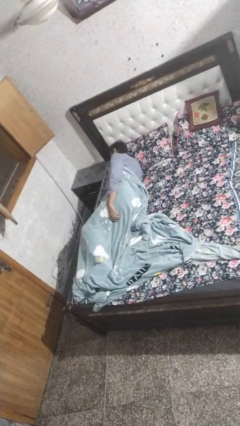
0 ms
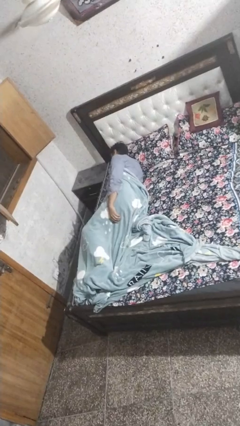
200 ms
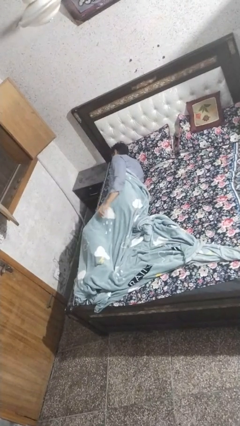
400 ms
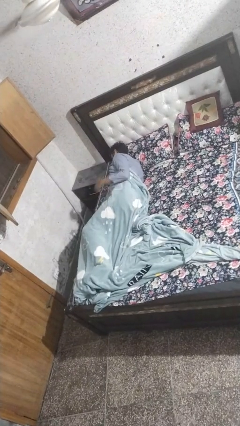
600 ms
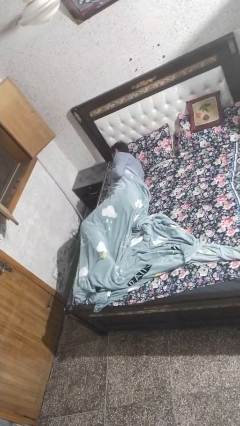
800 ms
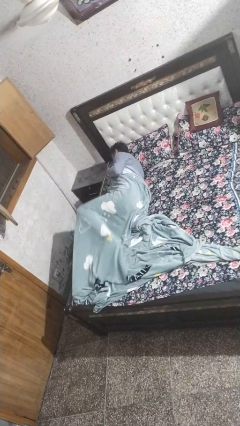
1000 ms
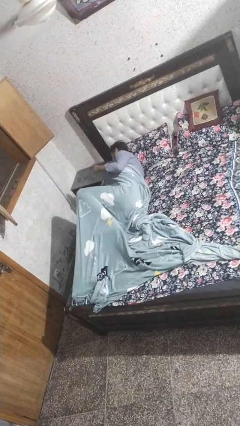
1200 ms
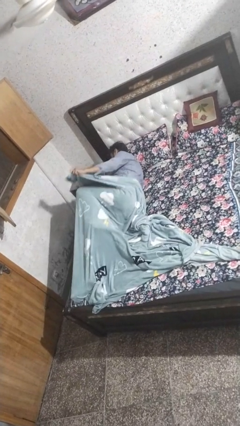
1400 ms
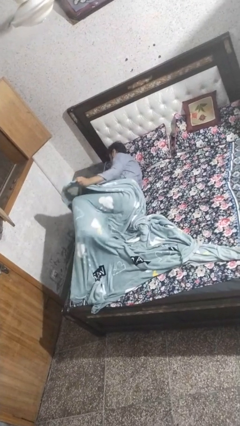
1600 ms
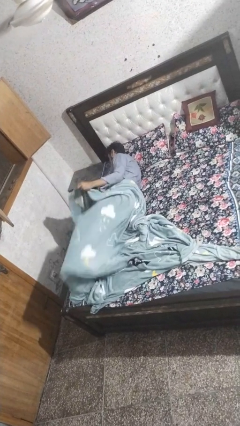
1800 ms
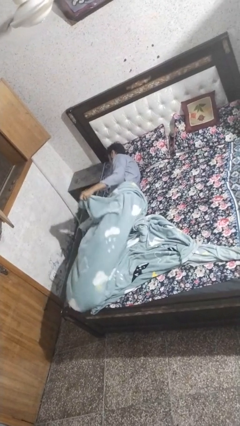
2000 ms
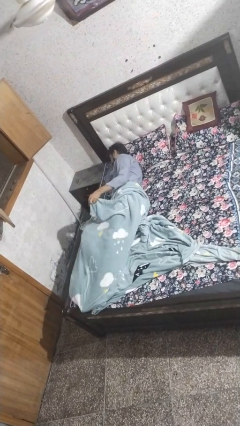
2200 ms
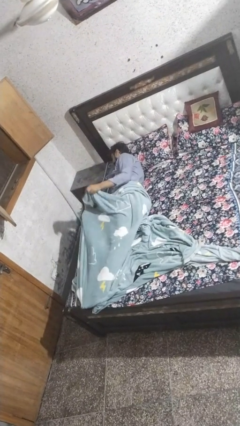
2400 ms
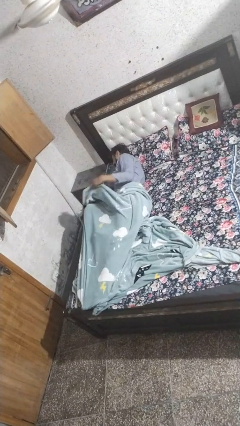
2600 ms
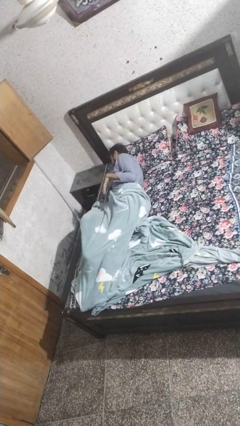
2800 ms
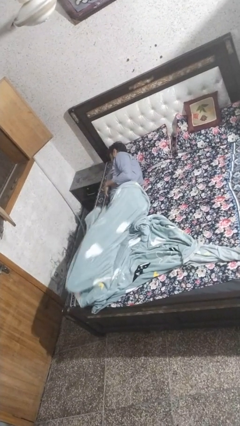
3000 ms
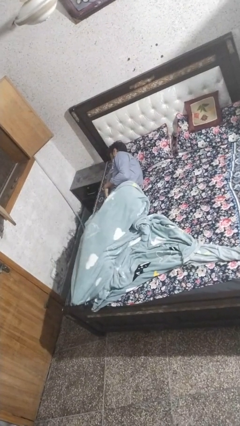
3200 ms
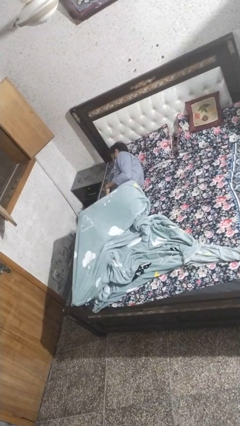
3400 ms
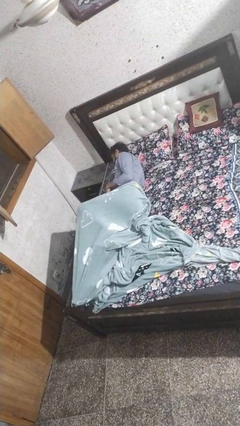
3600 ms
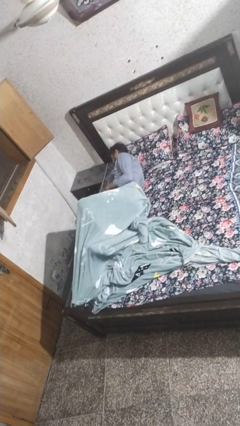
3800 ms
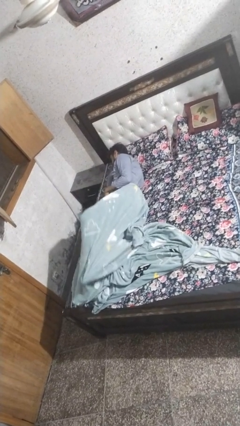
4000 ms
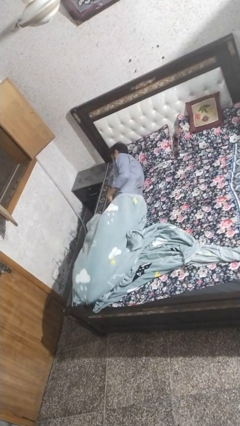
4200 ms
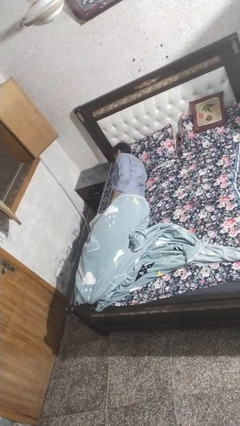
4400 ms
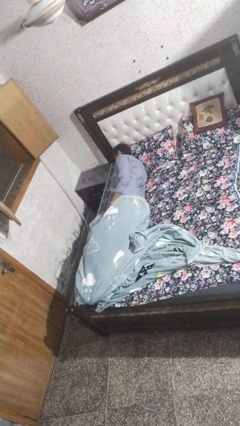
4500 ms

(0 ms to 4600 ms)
person uncovers with bedsheets

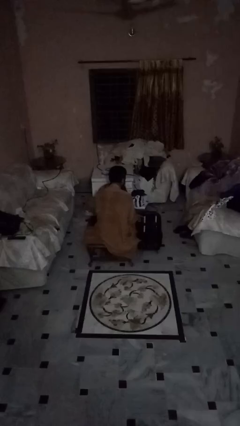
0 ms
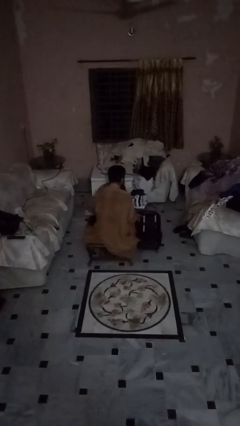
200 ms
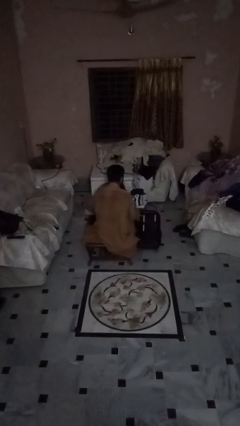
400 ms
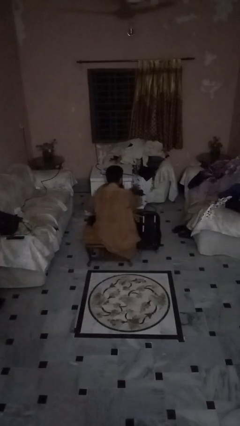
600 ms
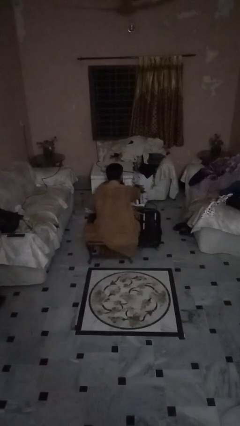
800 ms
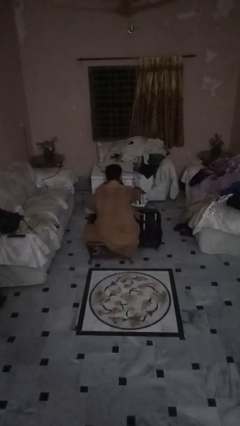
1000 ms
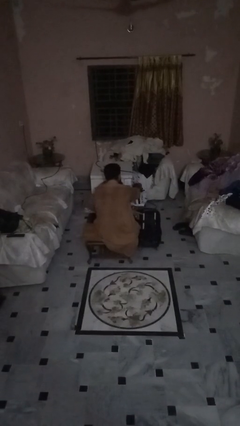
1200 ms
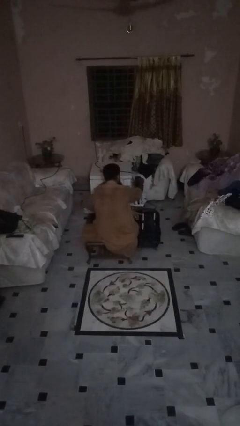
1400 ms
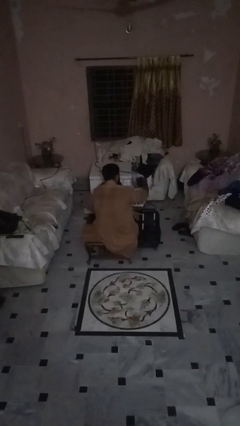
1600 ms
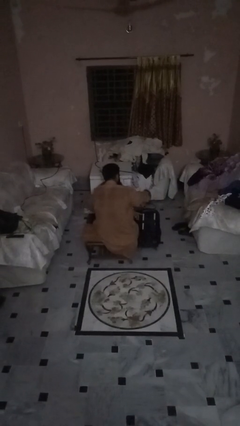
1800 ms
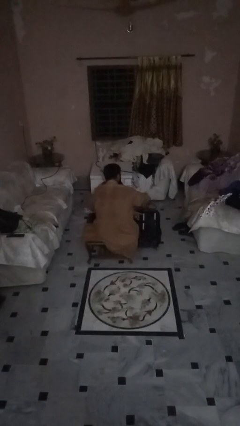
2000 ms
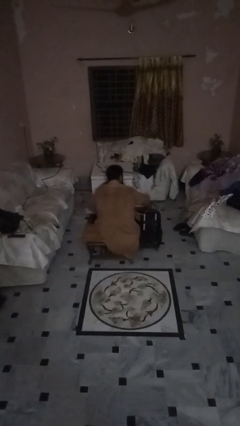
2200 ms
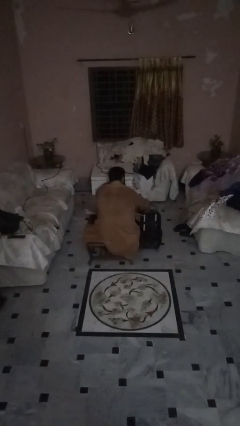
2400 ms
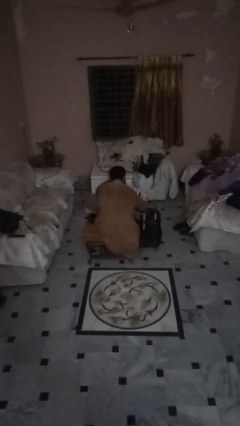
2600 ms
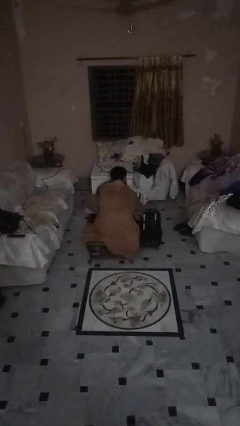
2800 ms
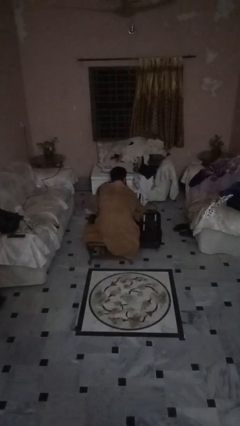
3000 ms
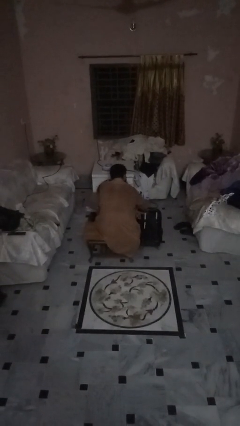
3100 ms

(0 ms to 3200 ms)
person loads clothes into suitcase

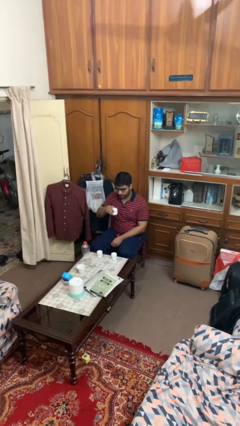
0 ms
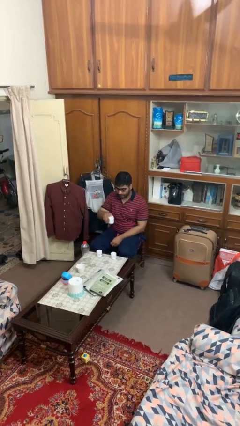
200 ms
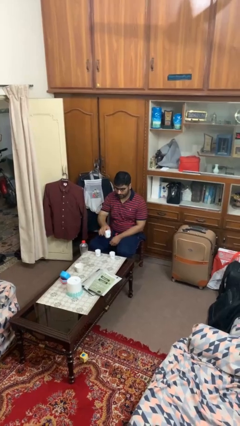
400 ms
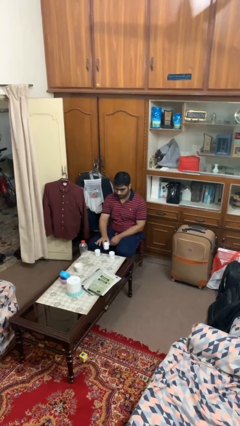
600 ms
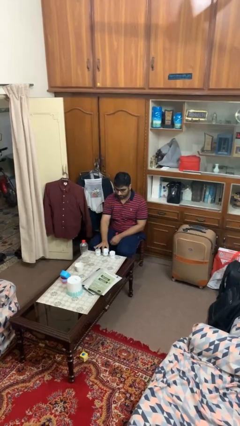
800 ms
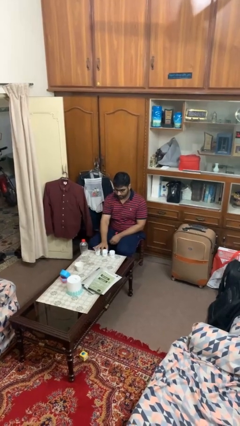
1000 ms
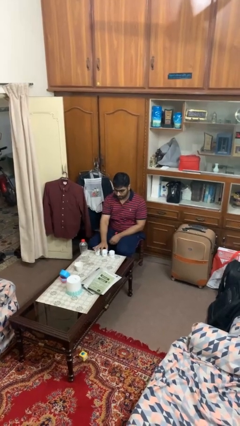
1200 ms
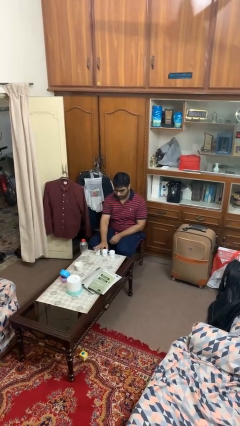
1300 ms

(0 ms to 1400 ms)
person puts down object on table

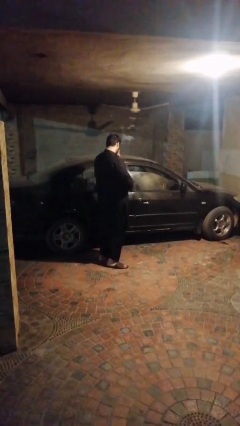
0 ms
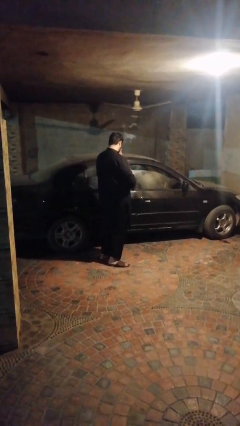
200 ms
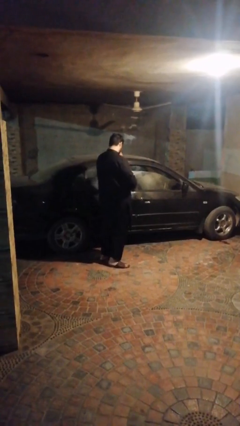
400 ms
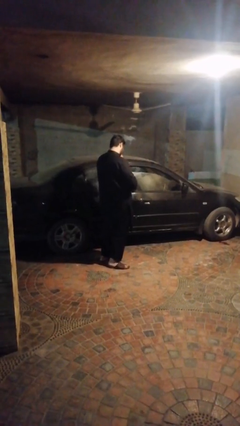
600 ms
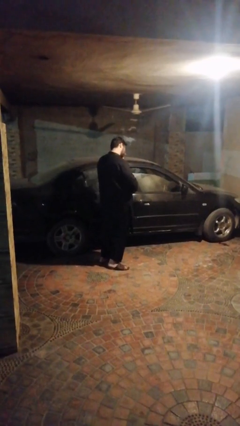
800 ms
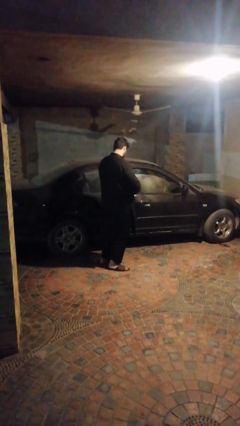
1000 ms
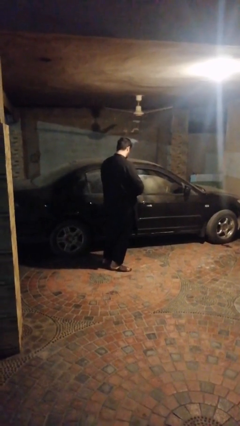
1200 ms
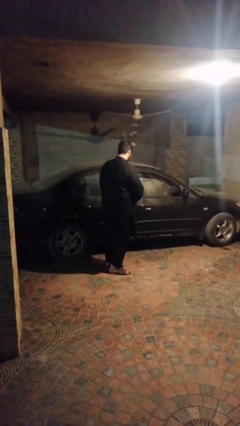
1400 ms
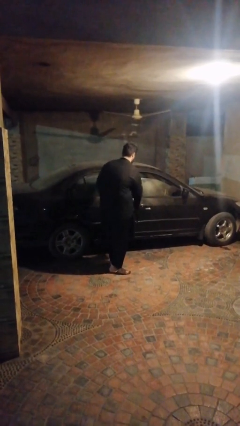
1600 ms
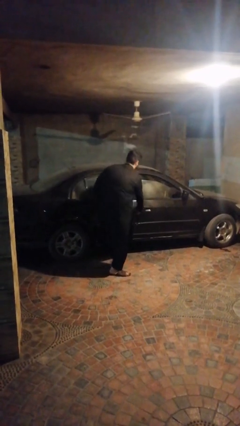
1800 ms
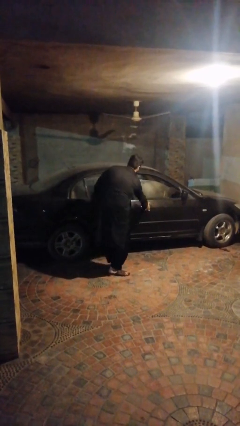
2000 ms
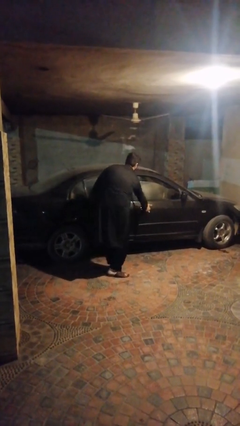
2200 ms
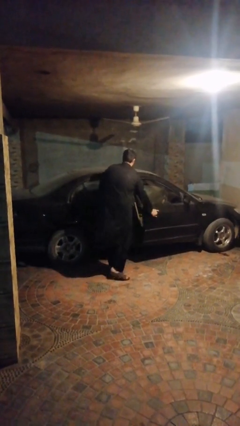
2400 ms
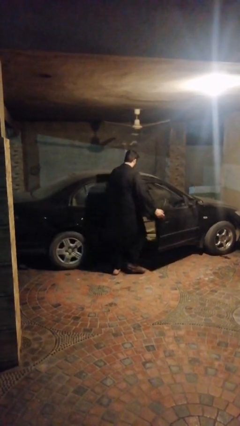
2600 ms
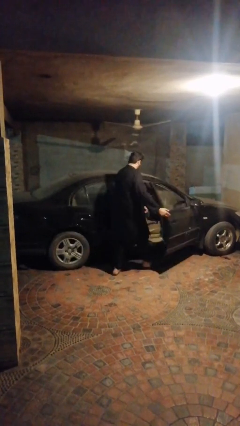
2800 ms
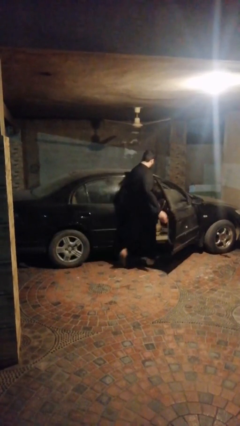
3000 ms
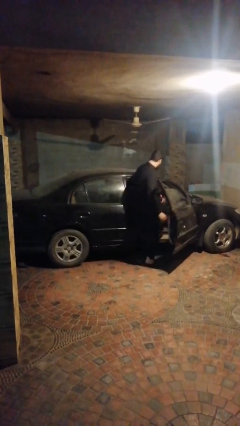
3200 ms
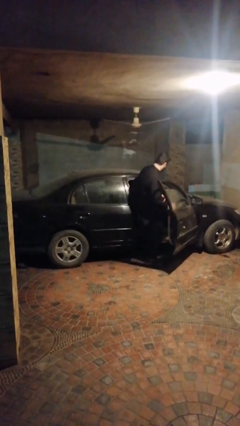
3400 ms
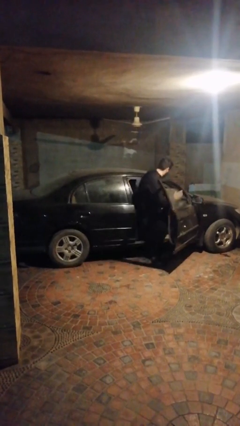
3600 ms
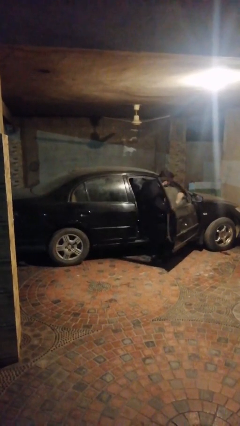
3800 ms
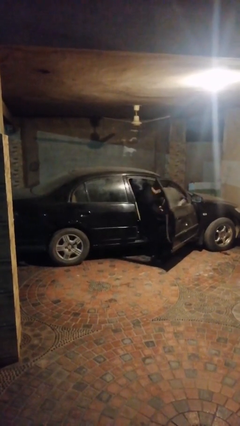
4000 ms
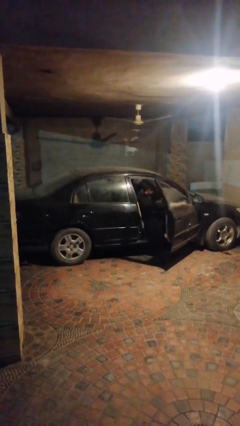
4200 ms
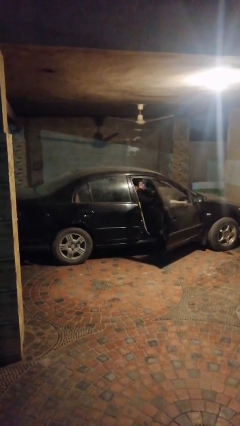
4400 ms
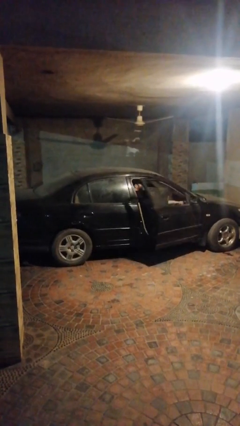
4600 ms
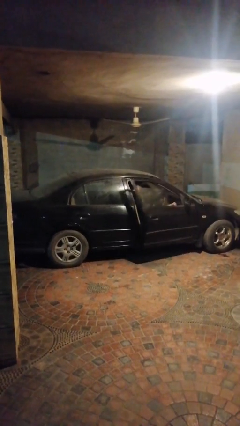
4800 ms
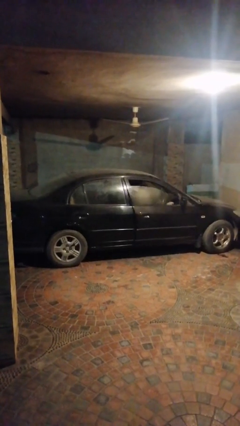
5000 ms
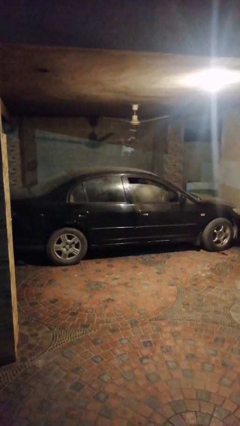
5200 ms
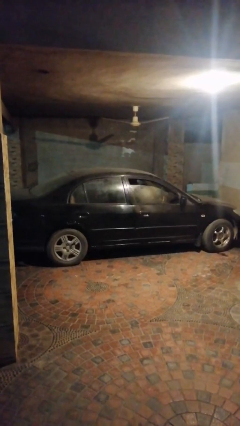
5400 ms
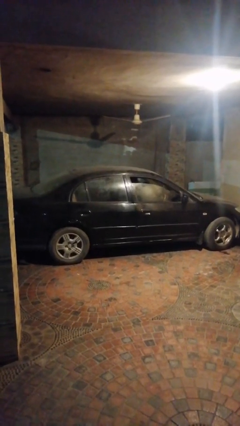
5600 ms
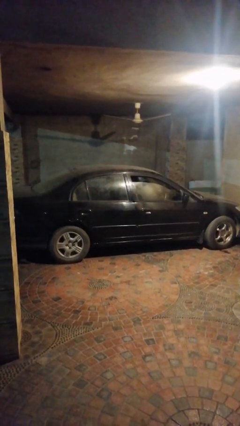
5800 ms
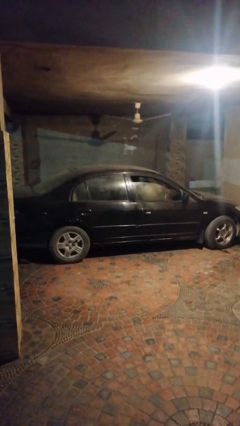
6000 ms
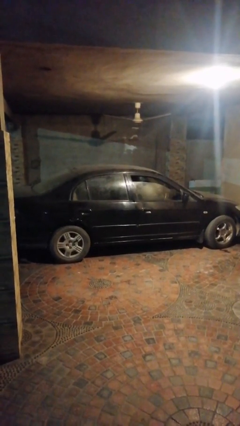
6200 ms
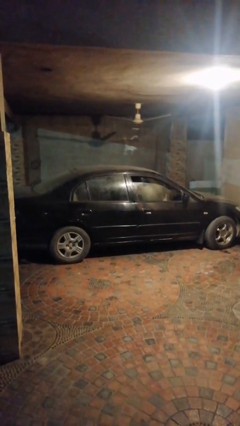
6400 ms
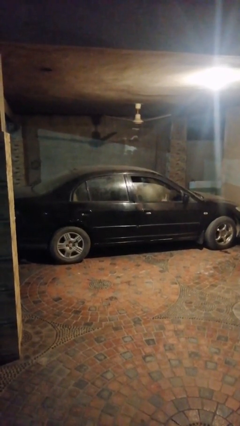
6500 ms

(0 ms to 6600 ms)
car picks up person

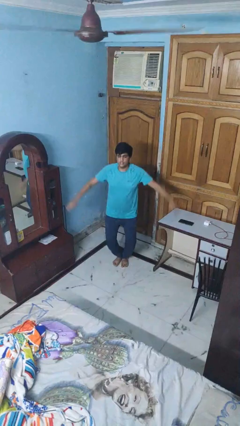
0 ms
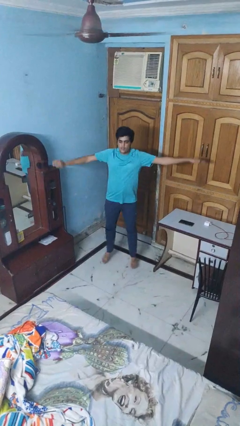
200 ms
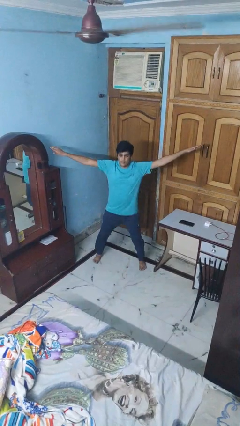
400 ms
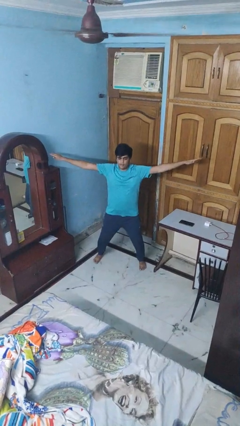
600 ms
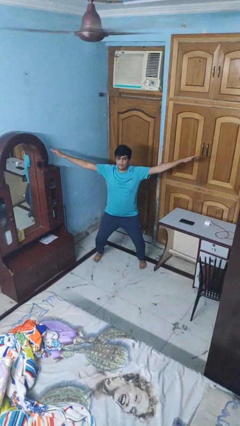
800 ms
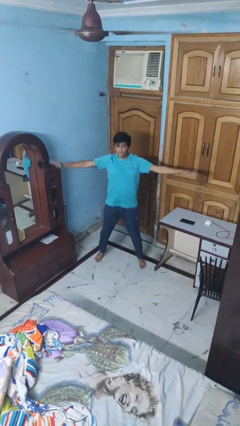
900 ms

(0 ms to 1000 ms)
person exercises with jumping jacks

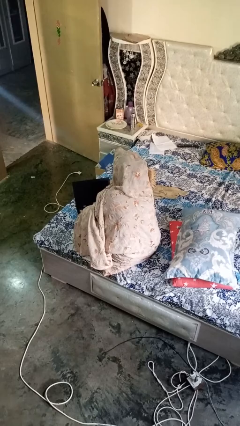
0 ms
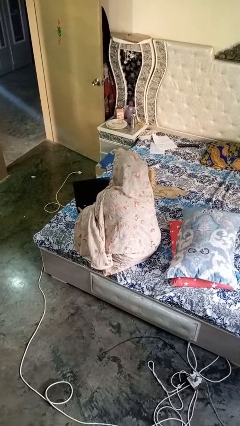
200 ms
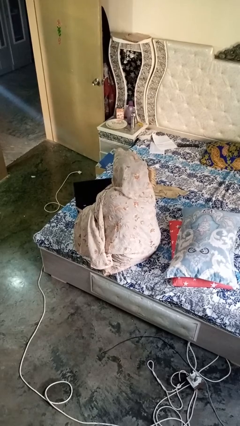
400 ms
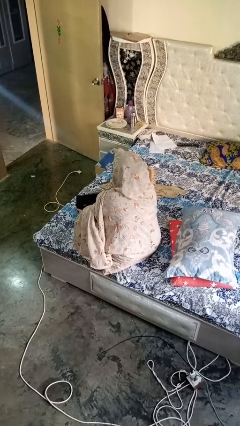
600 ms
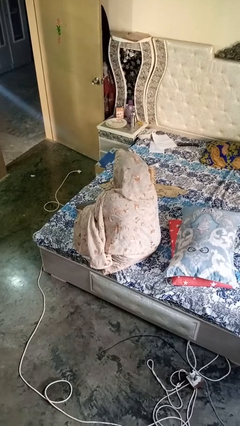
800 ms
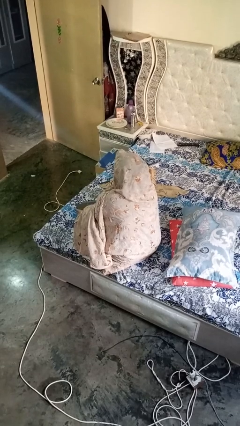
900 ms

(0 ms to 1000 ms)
person closes laptop
